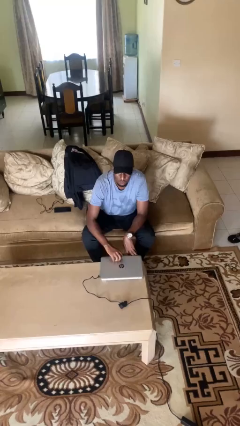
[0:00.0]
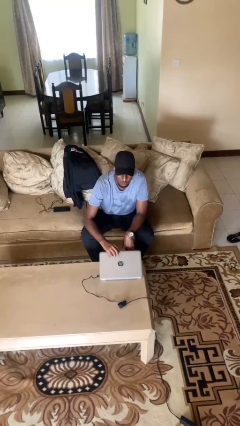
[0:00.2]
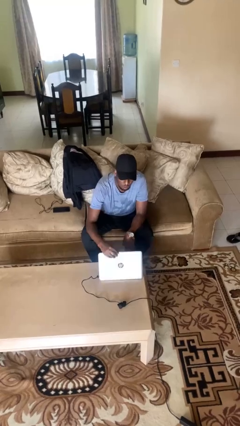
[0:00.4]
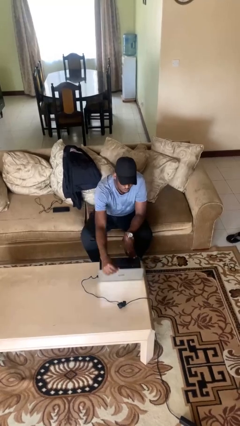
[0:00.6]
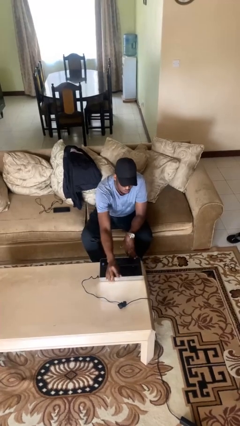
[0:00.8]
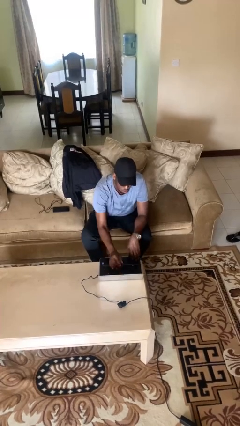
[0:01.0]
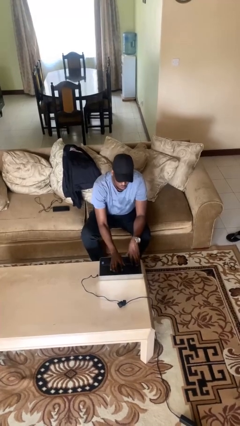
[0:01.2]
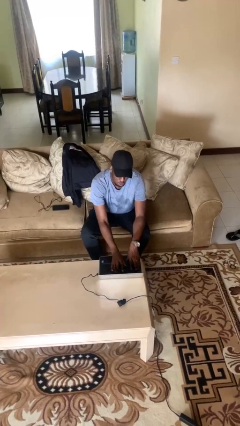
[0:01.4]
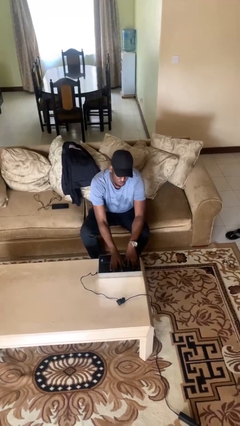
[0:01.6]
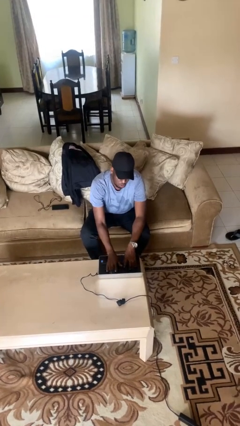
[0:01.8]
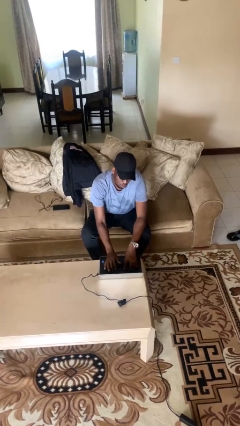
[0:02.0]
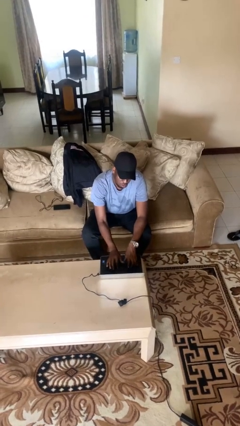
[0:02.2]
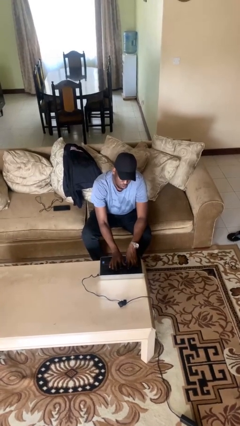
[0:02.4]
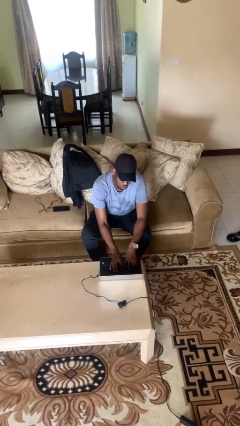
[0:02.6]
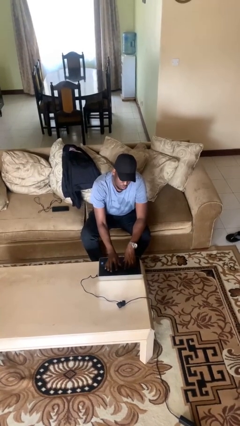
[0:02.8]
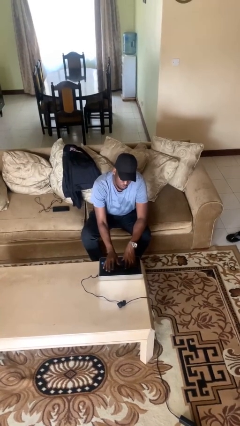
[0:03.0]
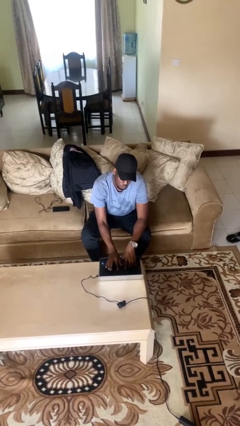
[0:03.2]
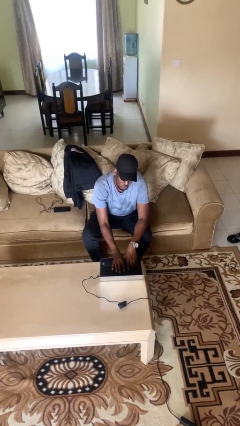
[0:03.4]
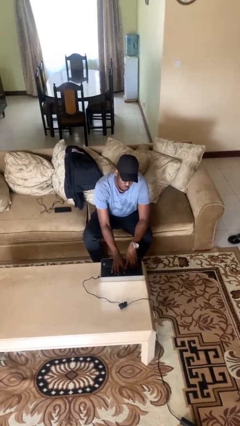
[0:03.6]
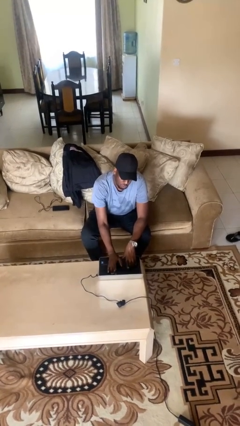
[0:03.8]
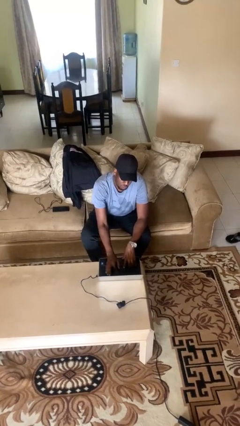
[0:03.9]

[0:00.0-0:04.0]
person interacts with laptop

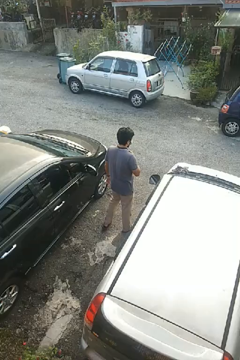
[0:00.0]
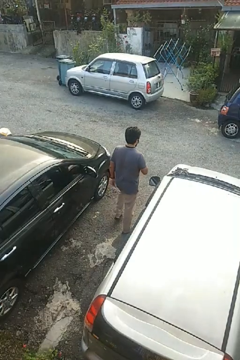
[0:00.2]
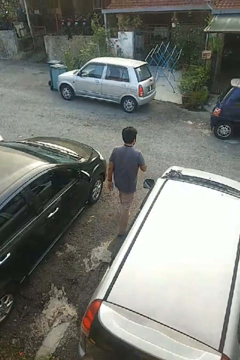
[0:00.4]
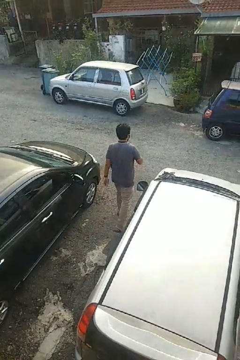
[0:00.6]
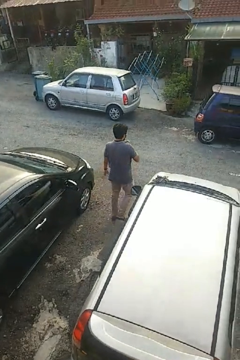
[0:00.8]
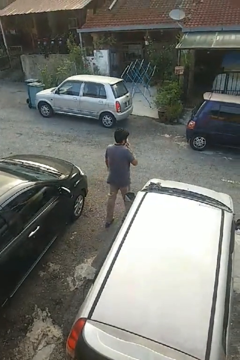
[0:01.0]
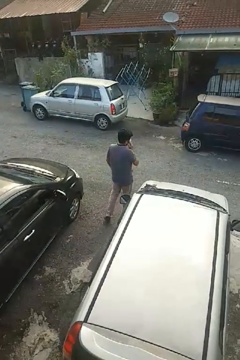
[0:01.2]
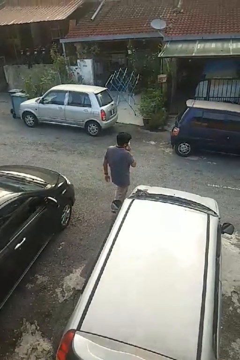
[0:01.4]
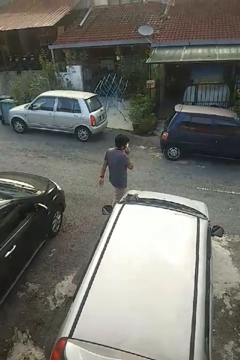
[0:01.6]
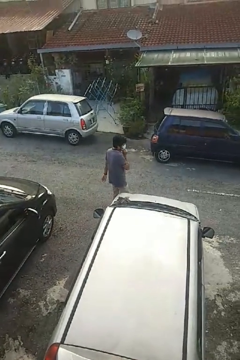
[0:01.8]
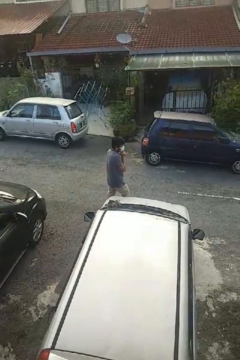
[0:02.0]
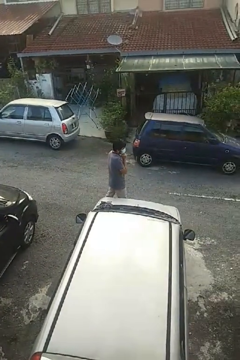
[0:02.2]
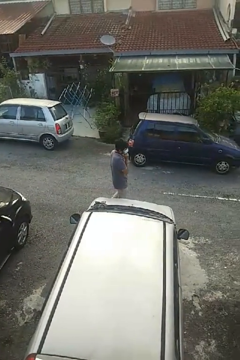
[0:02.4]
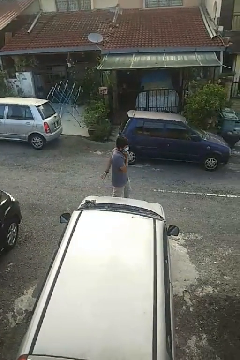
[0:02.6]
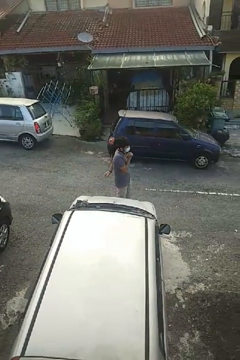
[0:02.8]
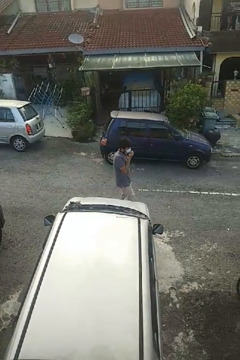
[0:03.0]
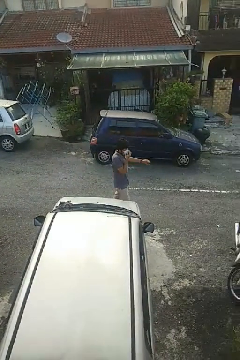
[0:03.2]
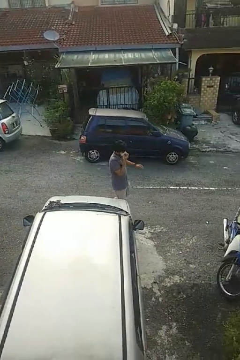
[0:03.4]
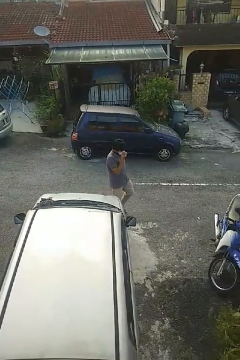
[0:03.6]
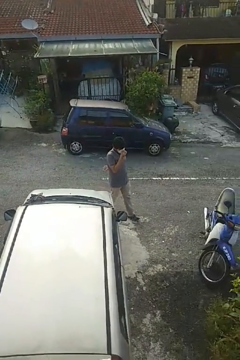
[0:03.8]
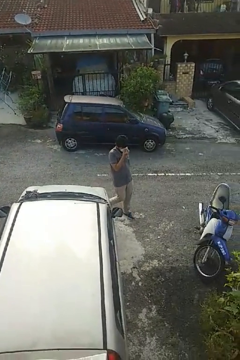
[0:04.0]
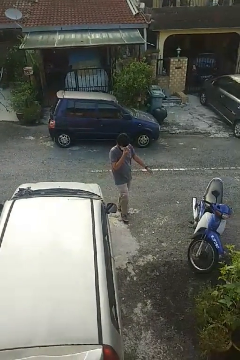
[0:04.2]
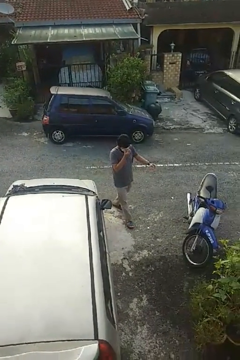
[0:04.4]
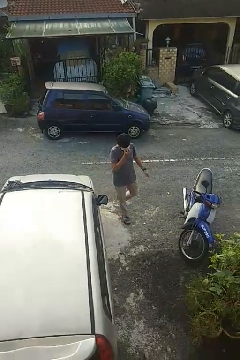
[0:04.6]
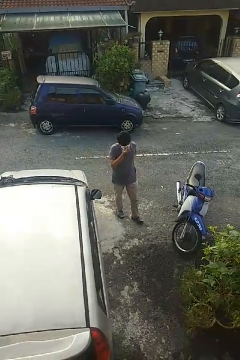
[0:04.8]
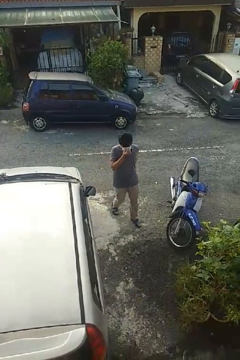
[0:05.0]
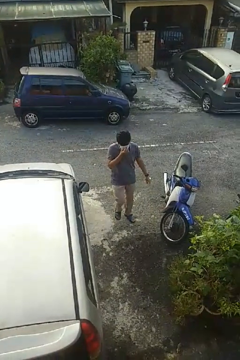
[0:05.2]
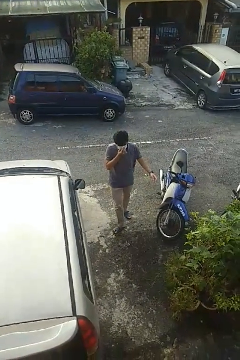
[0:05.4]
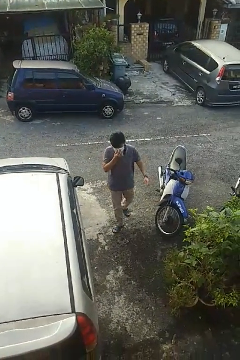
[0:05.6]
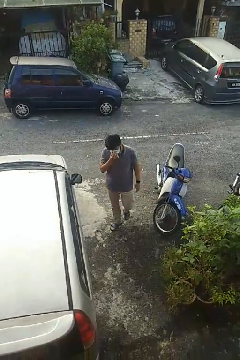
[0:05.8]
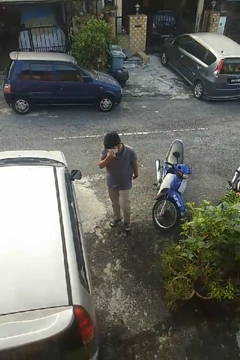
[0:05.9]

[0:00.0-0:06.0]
person walks around car

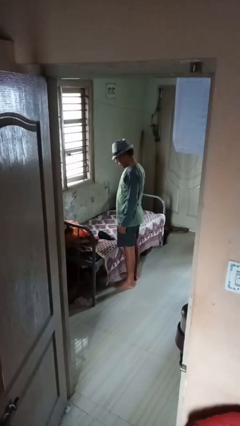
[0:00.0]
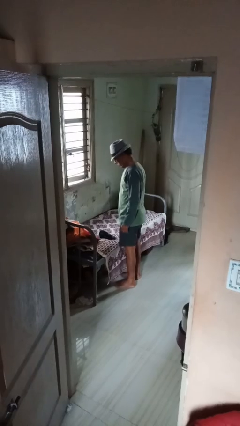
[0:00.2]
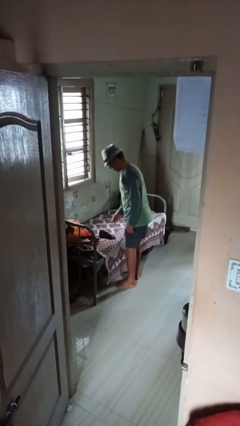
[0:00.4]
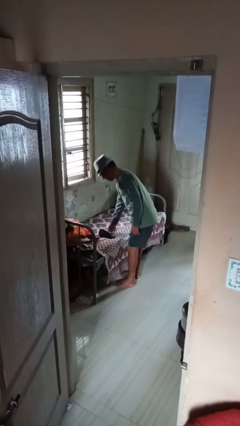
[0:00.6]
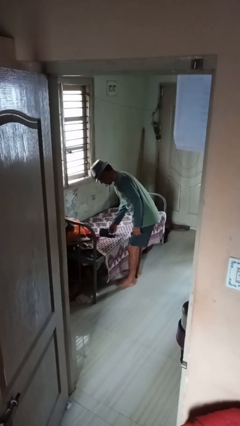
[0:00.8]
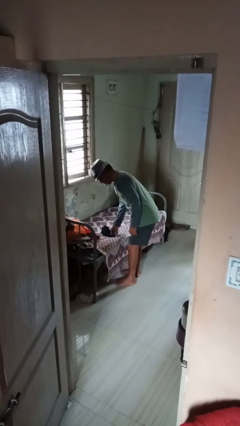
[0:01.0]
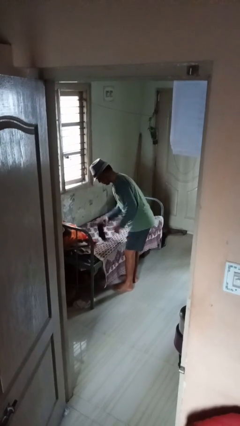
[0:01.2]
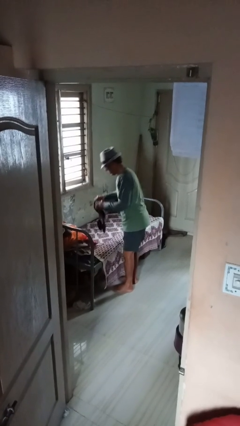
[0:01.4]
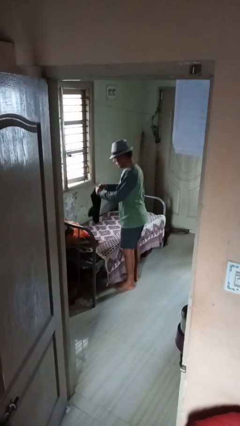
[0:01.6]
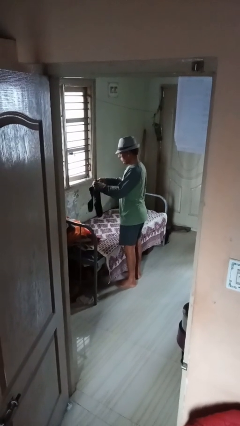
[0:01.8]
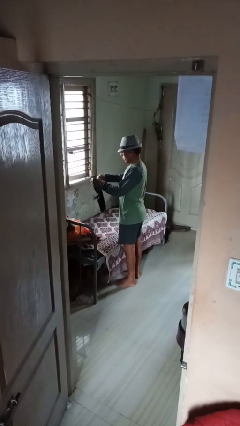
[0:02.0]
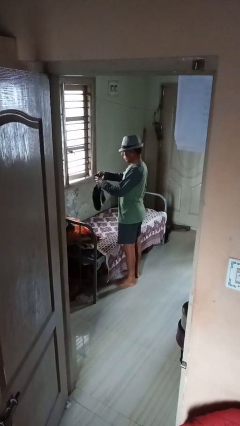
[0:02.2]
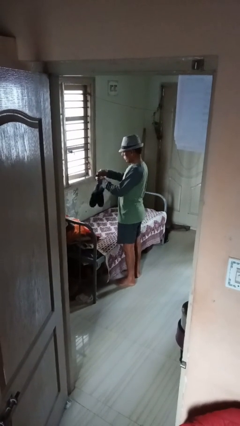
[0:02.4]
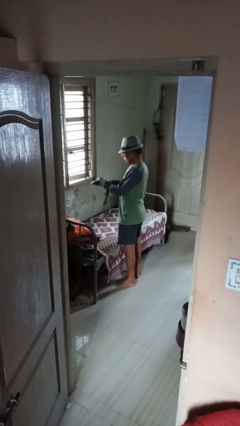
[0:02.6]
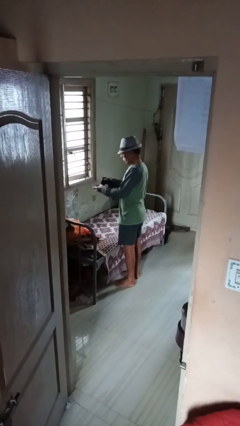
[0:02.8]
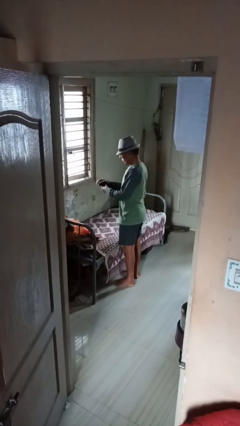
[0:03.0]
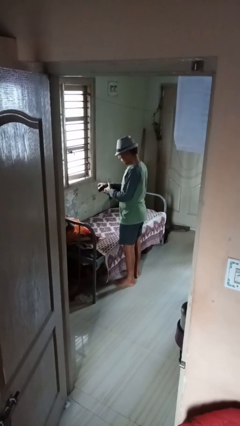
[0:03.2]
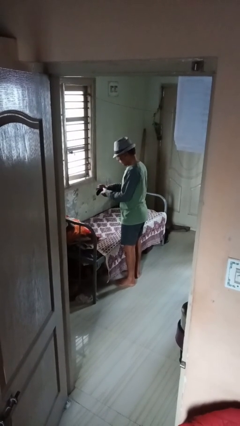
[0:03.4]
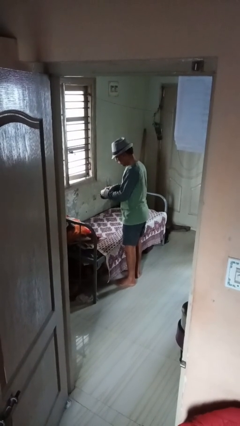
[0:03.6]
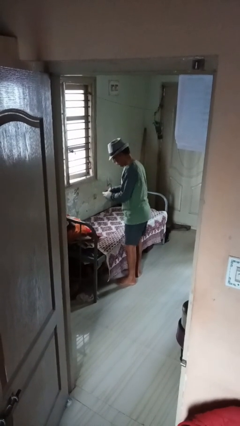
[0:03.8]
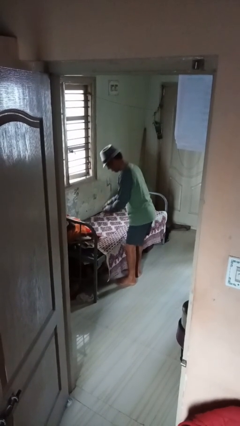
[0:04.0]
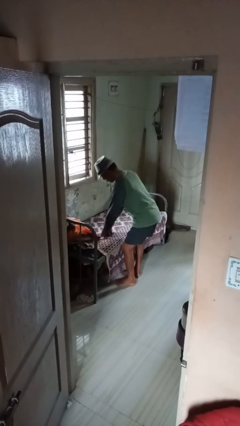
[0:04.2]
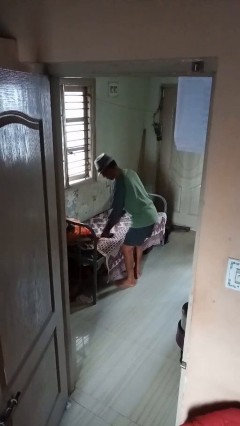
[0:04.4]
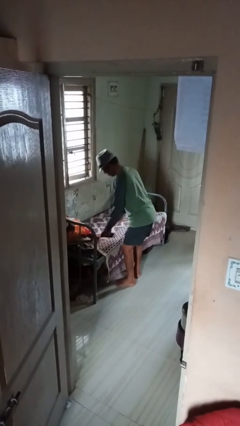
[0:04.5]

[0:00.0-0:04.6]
person folds socks

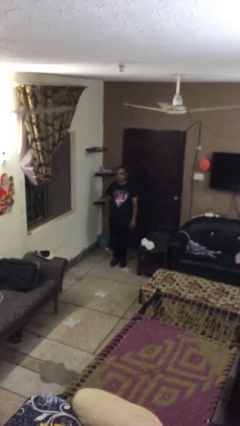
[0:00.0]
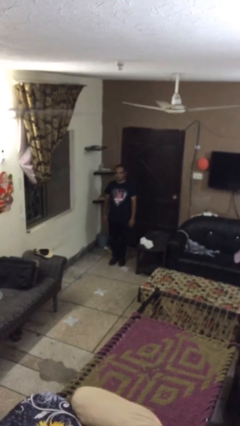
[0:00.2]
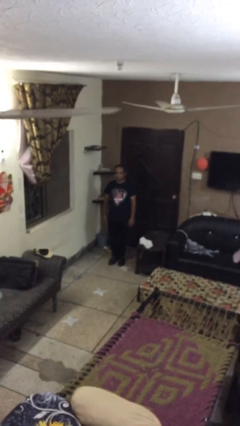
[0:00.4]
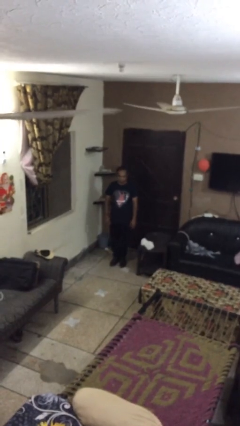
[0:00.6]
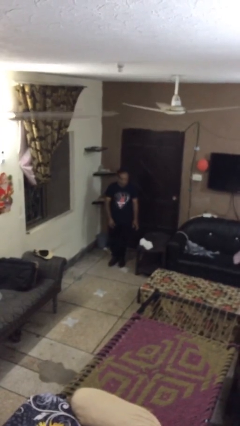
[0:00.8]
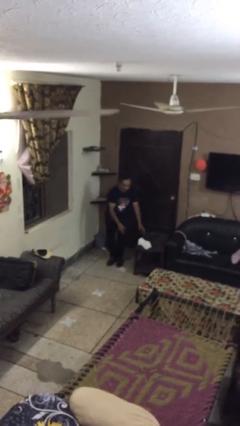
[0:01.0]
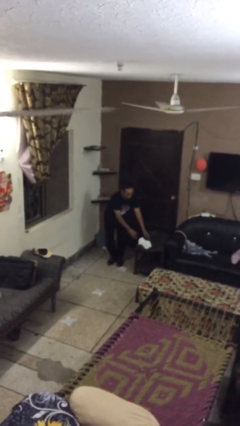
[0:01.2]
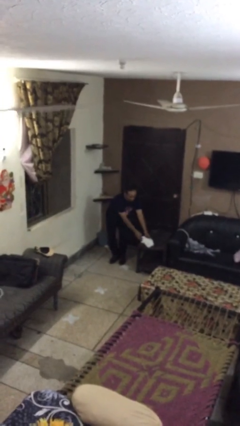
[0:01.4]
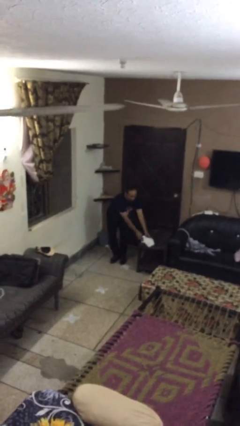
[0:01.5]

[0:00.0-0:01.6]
person picks up object from table

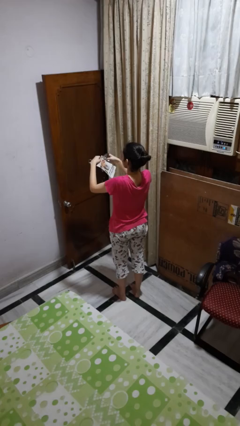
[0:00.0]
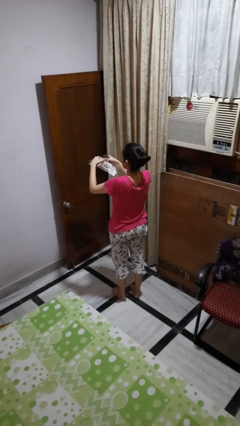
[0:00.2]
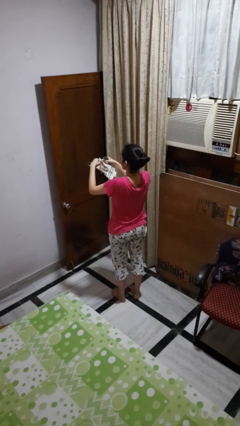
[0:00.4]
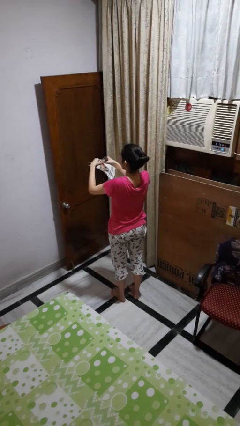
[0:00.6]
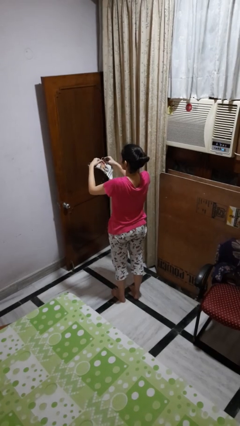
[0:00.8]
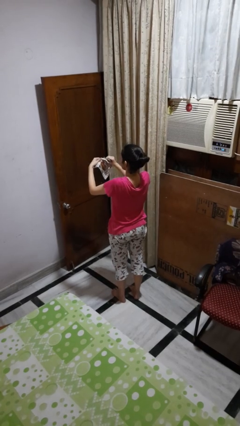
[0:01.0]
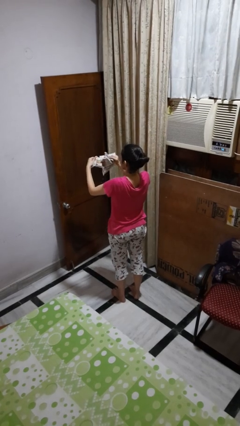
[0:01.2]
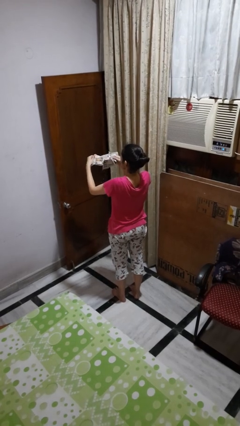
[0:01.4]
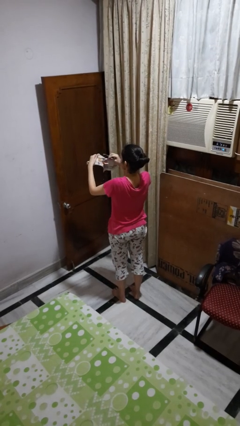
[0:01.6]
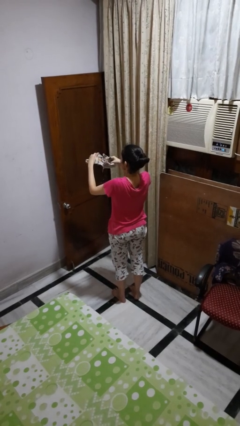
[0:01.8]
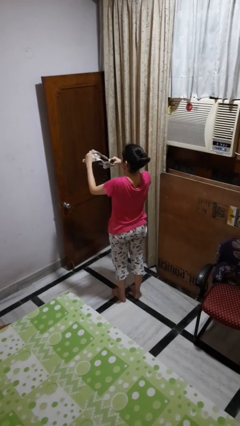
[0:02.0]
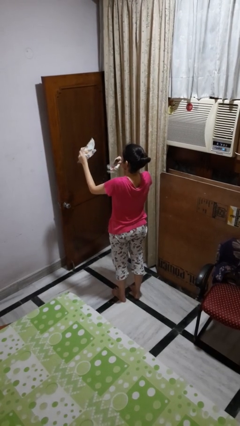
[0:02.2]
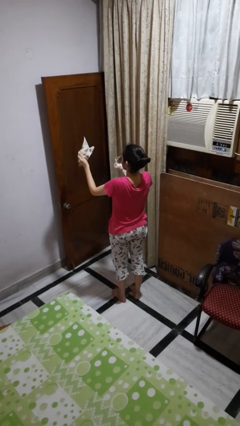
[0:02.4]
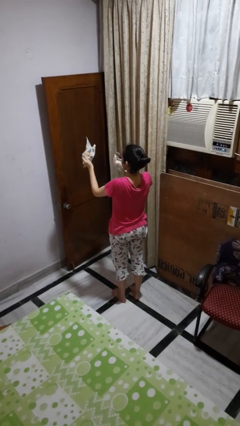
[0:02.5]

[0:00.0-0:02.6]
person tears paper
